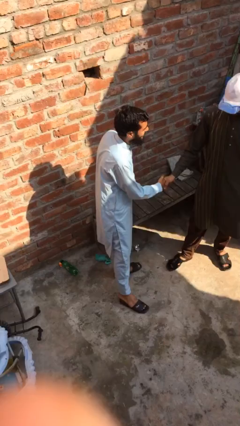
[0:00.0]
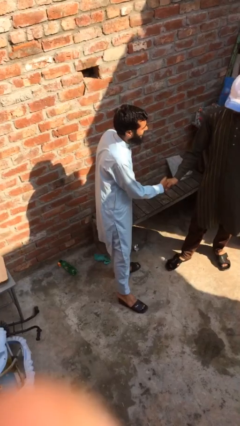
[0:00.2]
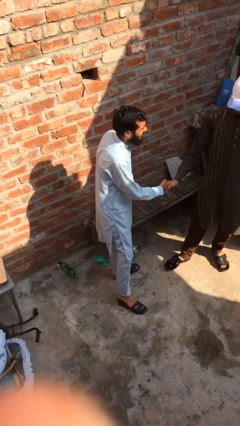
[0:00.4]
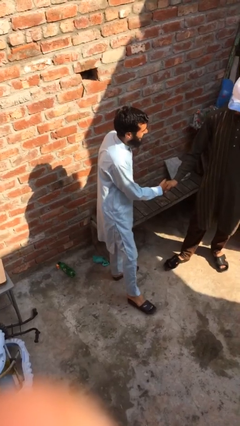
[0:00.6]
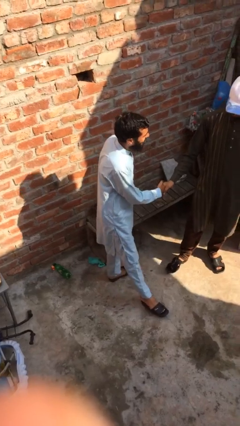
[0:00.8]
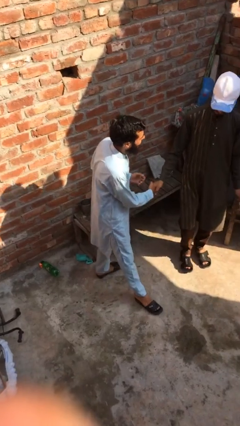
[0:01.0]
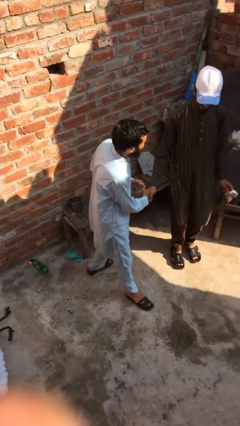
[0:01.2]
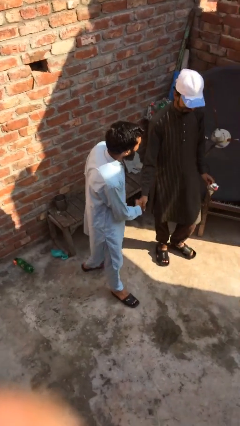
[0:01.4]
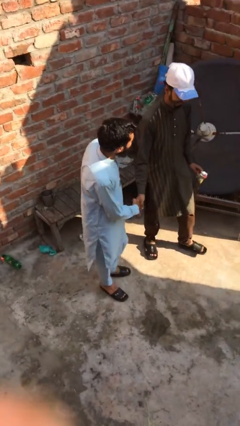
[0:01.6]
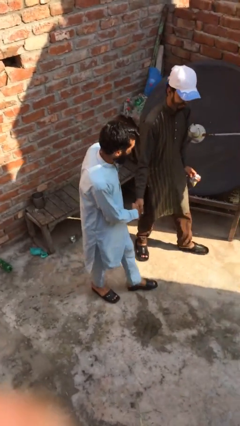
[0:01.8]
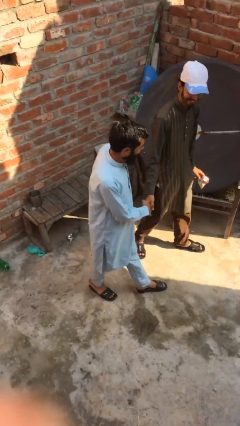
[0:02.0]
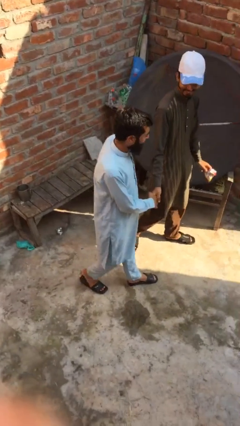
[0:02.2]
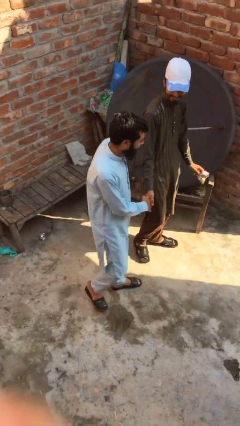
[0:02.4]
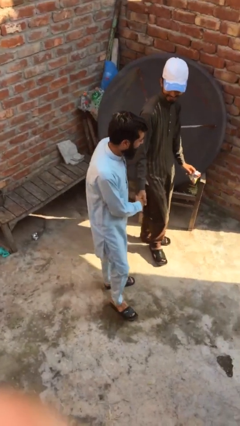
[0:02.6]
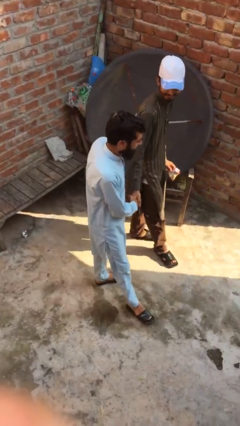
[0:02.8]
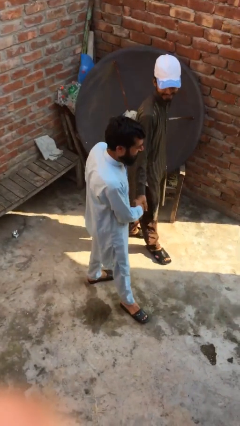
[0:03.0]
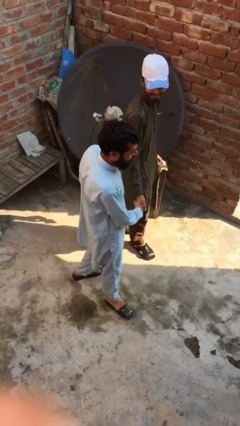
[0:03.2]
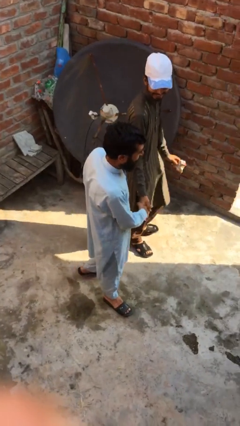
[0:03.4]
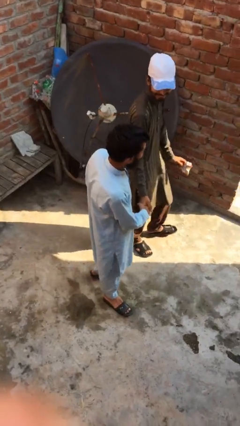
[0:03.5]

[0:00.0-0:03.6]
person talks to person

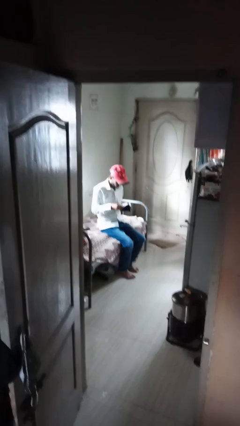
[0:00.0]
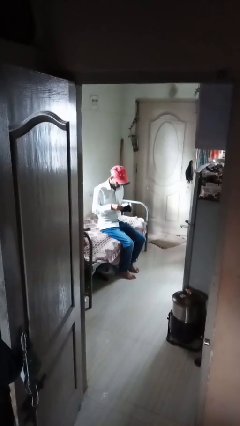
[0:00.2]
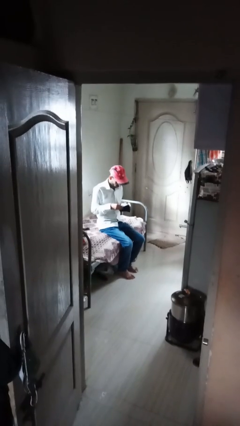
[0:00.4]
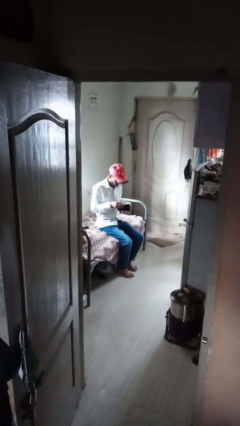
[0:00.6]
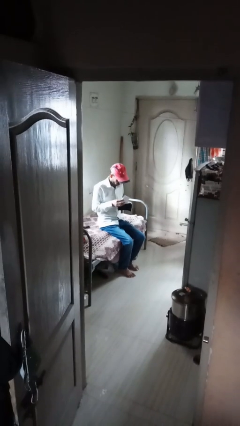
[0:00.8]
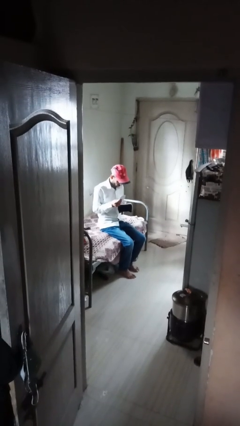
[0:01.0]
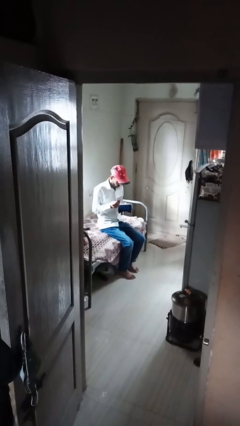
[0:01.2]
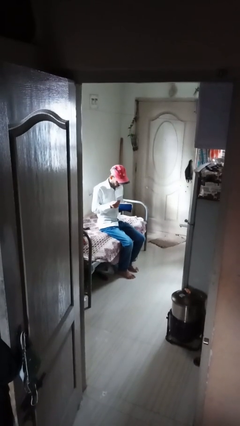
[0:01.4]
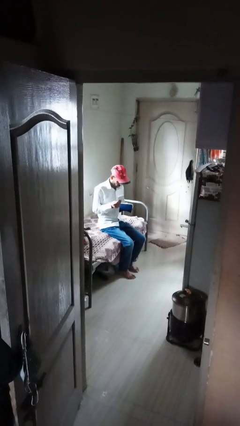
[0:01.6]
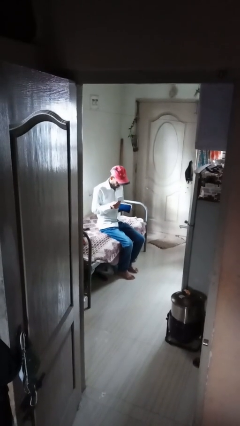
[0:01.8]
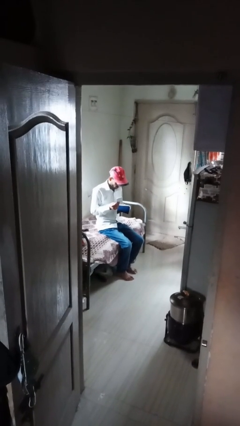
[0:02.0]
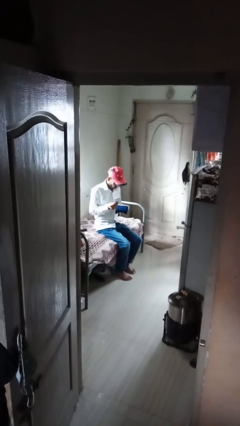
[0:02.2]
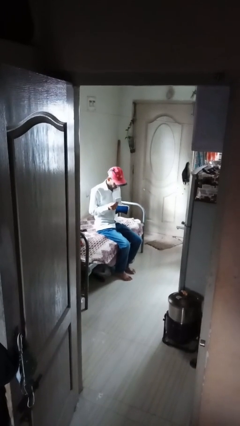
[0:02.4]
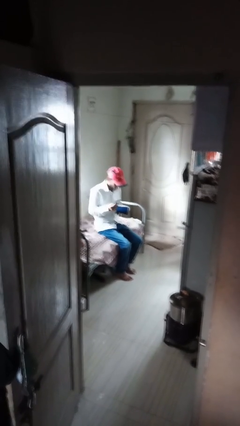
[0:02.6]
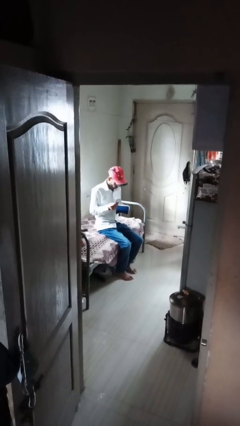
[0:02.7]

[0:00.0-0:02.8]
person takes object from purse

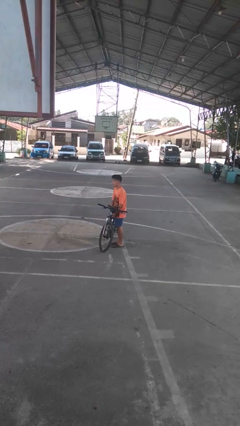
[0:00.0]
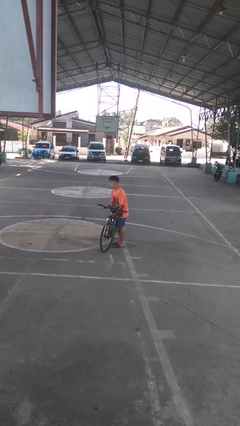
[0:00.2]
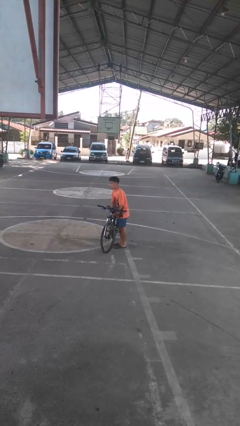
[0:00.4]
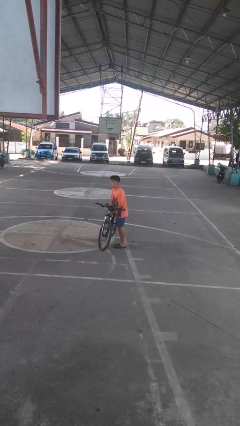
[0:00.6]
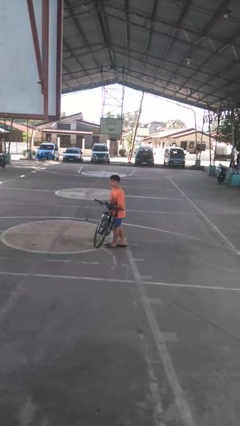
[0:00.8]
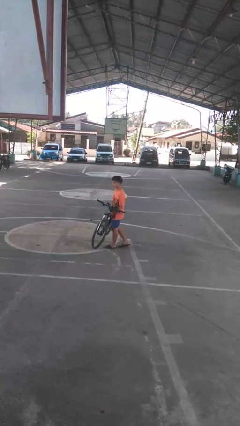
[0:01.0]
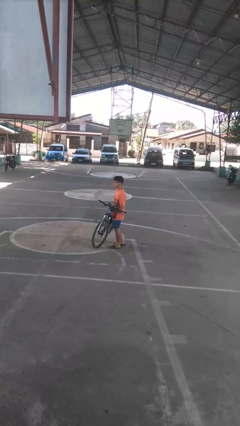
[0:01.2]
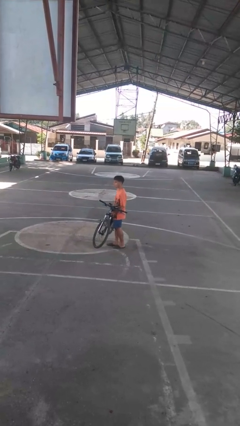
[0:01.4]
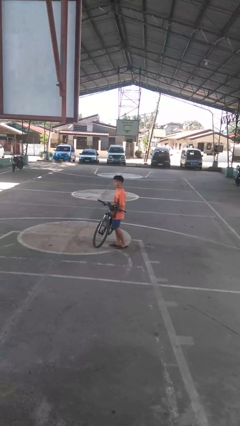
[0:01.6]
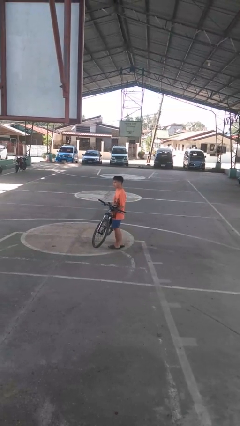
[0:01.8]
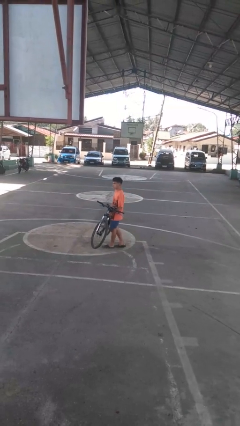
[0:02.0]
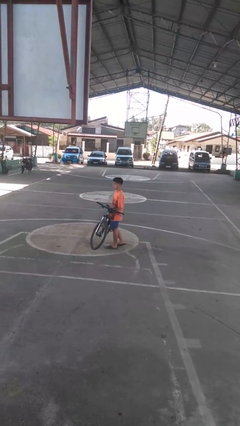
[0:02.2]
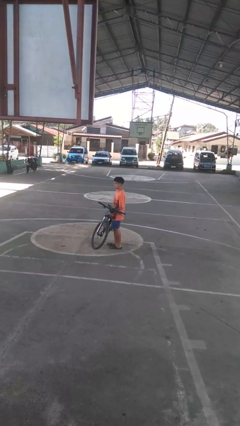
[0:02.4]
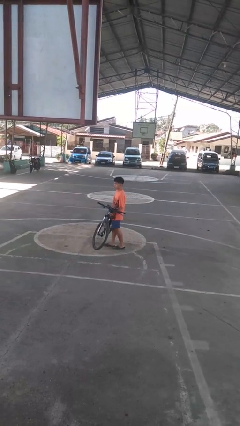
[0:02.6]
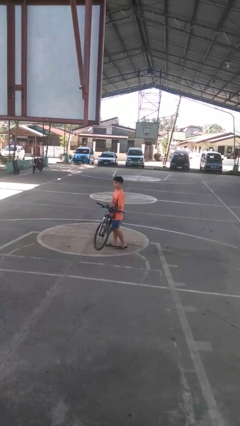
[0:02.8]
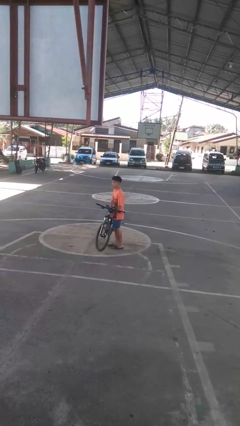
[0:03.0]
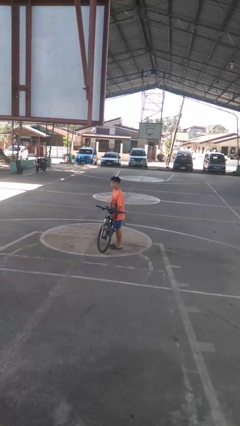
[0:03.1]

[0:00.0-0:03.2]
person carries bicycle

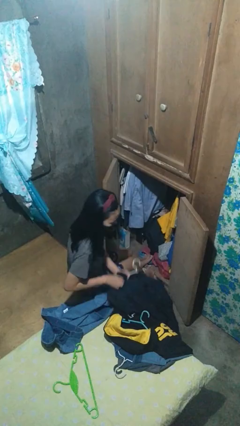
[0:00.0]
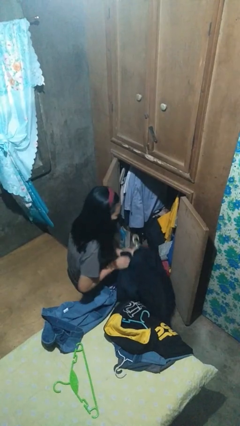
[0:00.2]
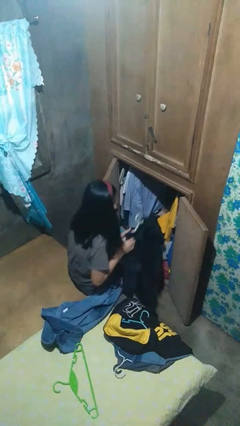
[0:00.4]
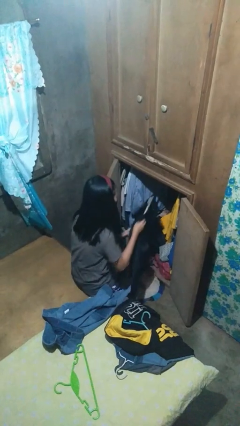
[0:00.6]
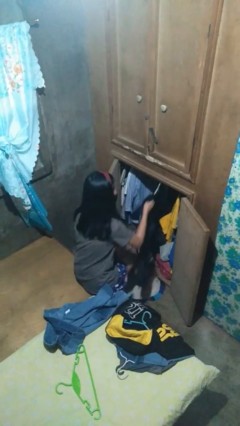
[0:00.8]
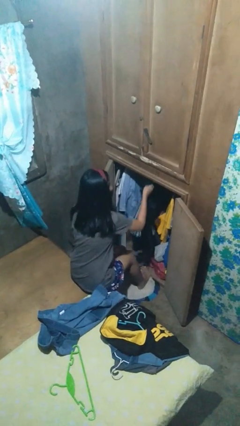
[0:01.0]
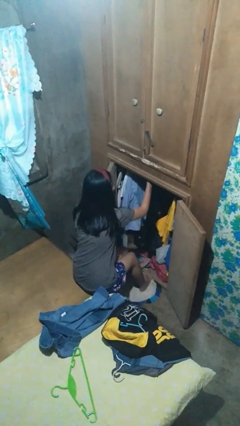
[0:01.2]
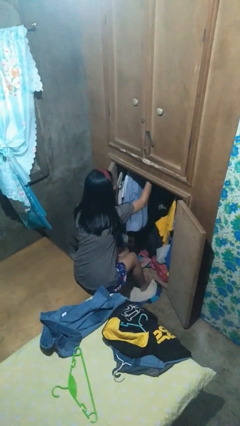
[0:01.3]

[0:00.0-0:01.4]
person puts clothes into closet

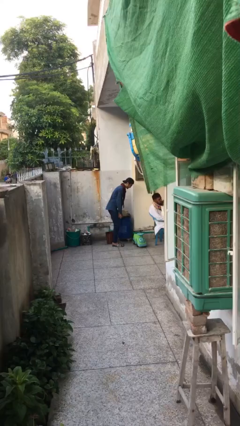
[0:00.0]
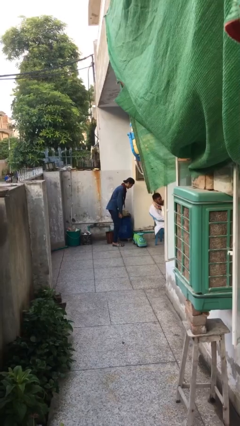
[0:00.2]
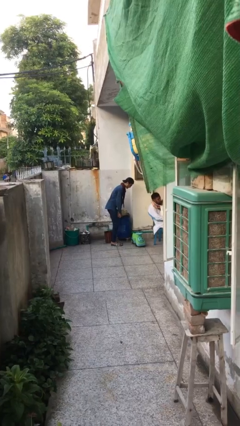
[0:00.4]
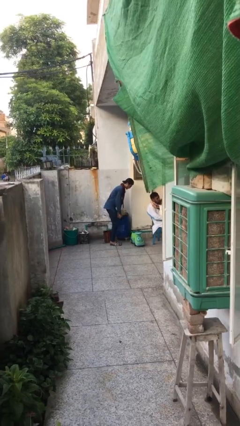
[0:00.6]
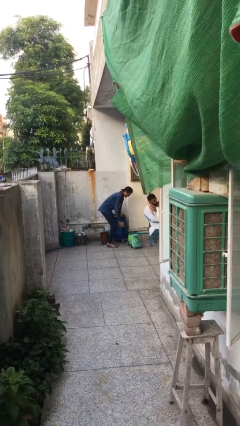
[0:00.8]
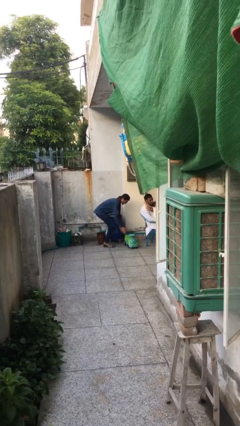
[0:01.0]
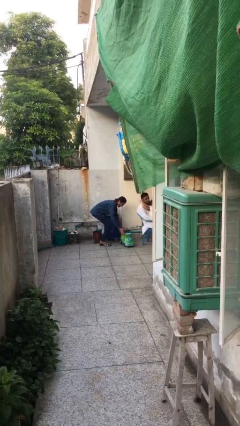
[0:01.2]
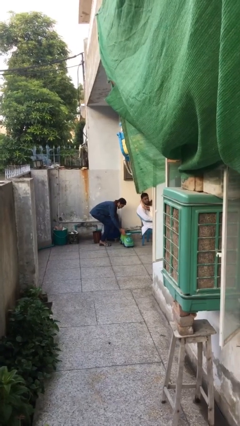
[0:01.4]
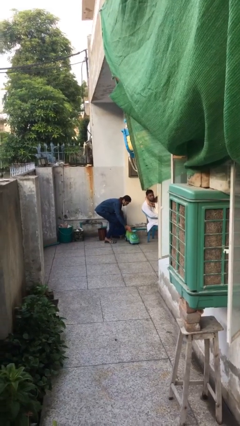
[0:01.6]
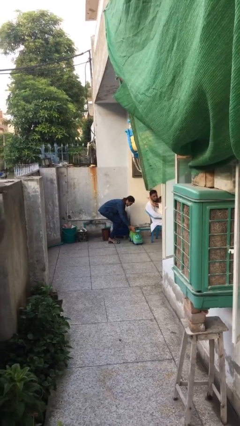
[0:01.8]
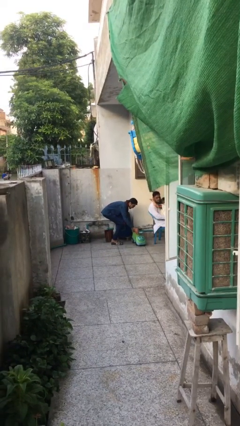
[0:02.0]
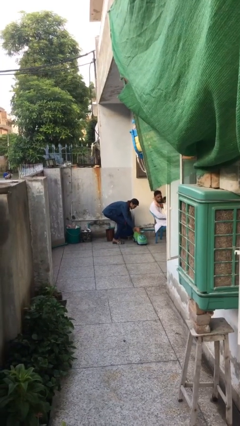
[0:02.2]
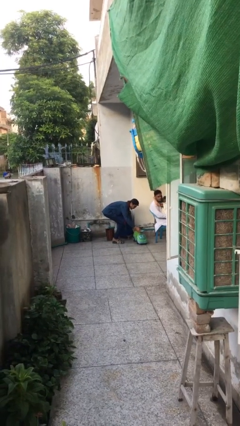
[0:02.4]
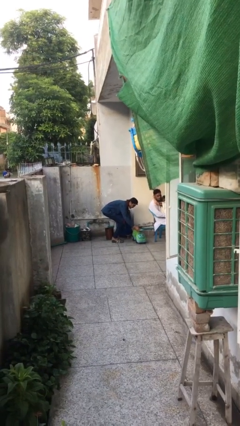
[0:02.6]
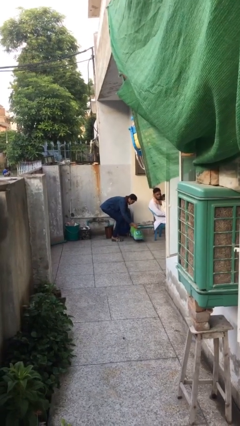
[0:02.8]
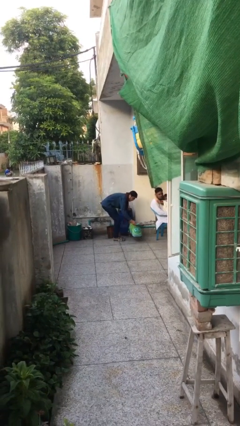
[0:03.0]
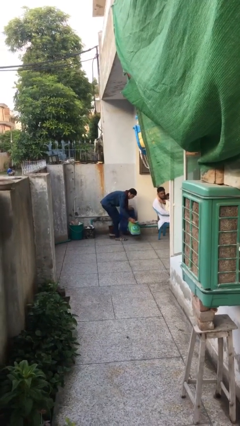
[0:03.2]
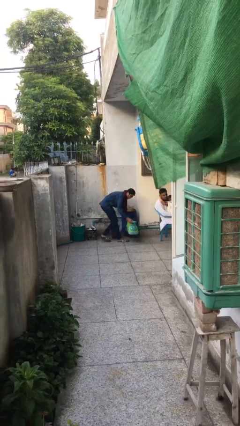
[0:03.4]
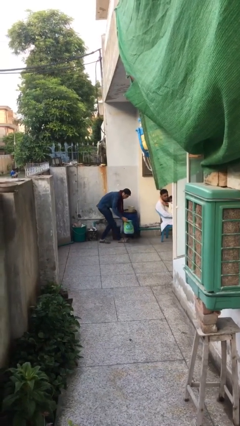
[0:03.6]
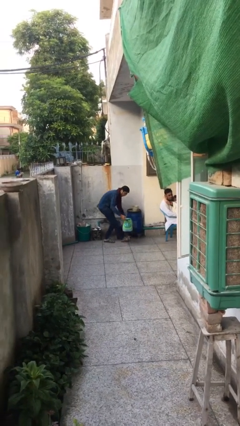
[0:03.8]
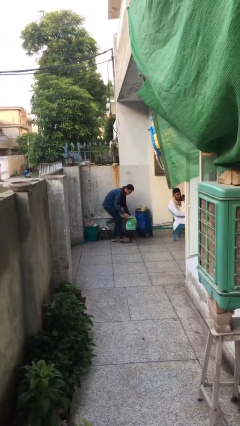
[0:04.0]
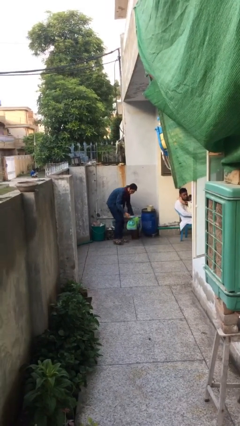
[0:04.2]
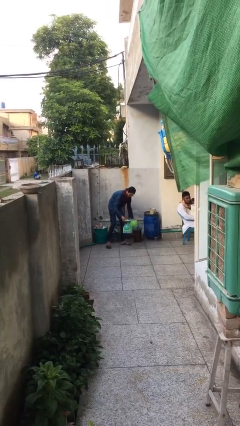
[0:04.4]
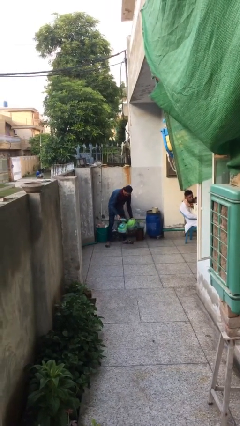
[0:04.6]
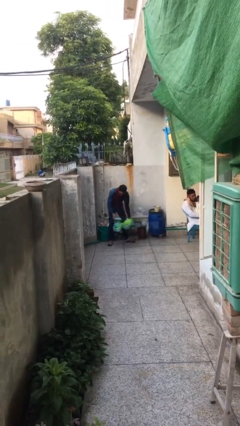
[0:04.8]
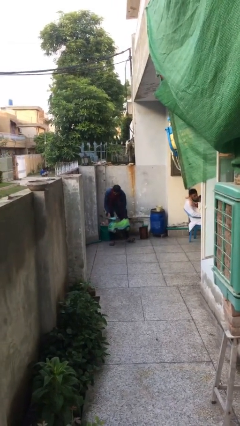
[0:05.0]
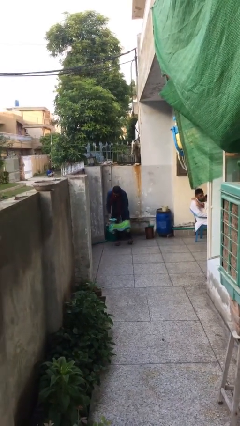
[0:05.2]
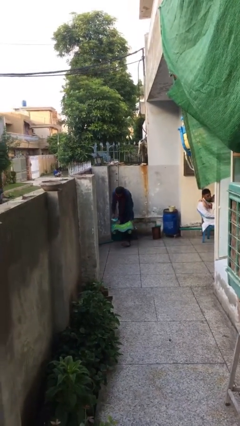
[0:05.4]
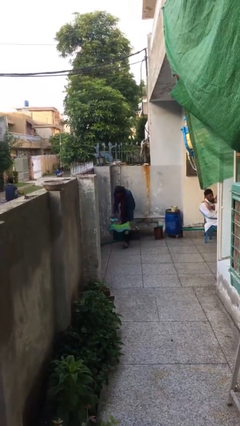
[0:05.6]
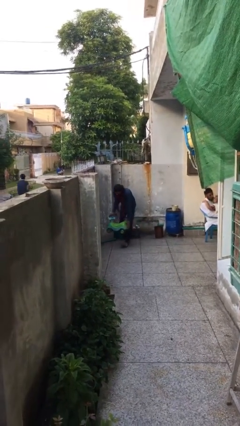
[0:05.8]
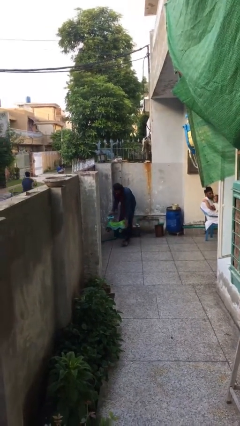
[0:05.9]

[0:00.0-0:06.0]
person steals object from person

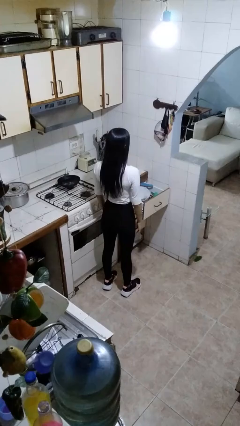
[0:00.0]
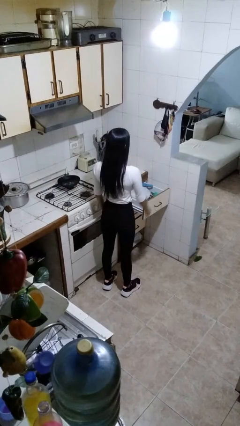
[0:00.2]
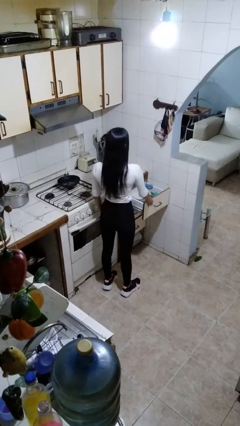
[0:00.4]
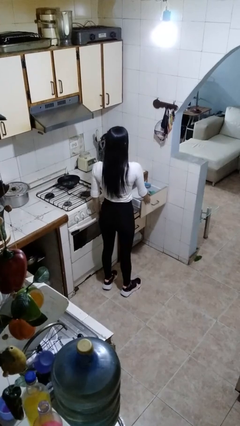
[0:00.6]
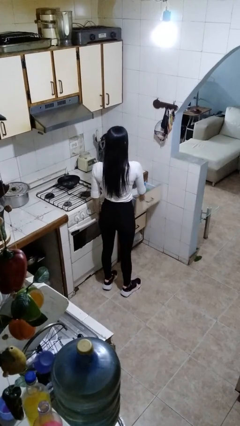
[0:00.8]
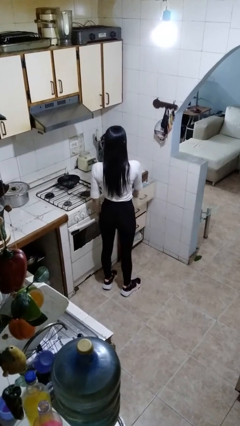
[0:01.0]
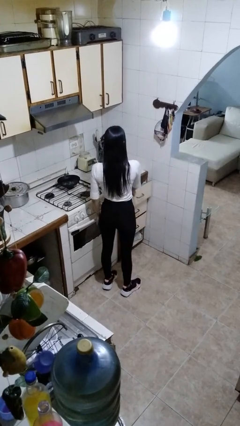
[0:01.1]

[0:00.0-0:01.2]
person closes kitchen drawer
